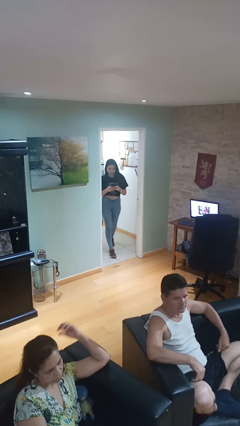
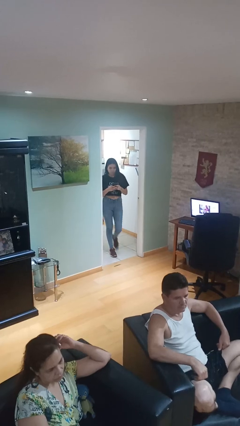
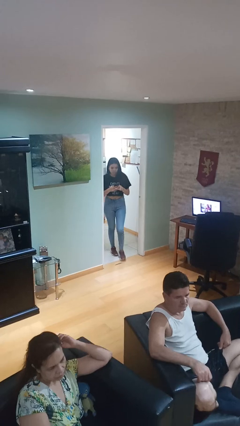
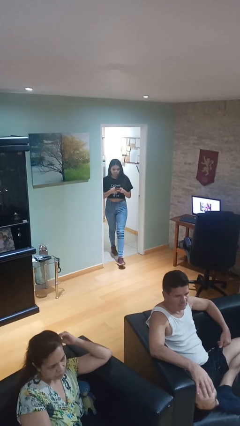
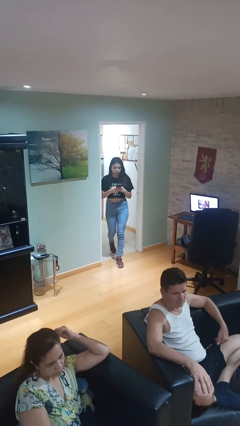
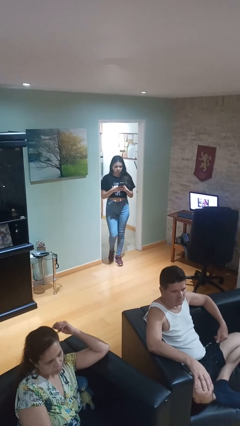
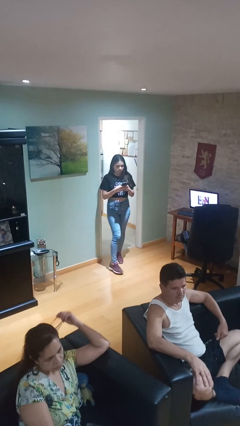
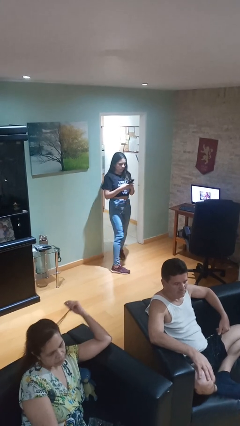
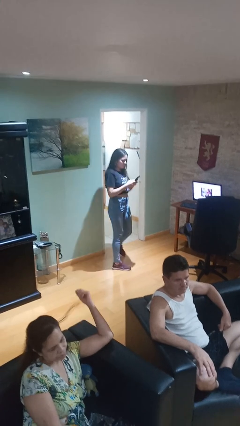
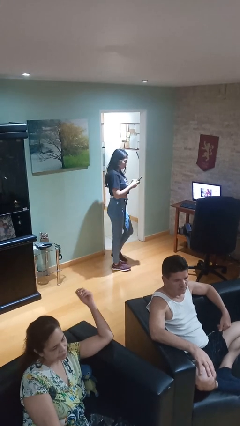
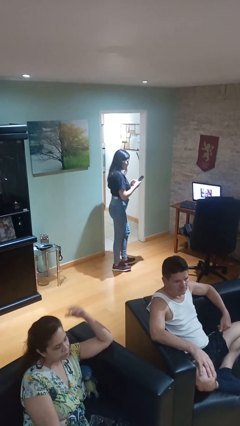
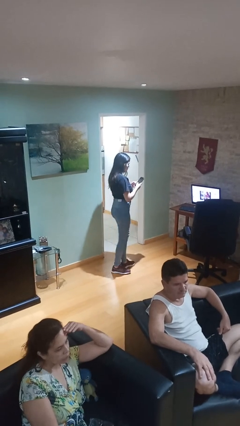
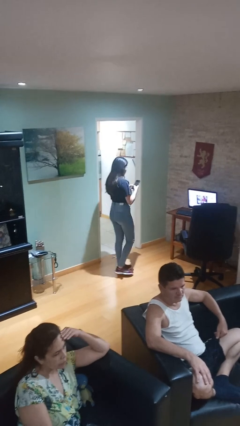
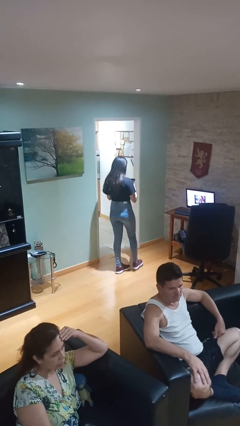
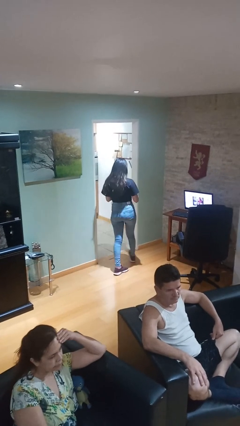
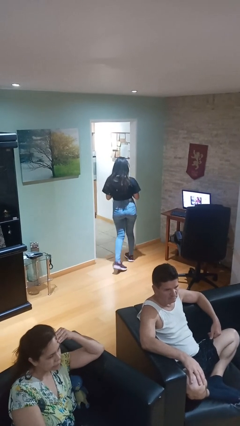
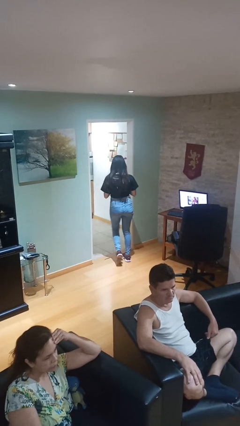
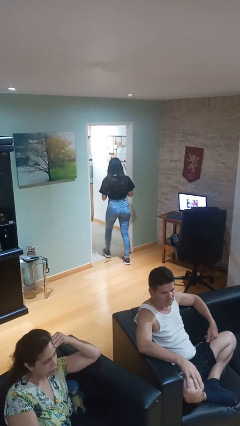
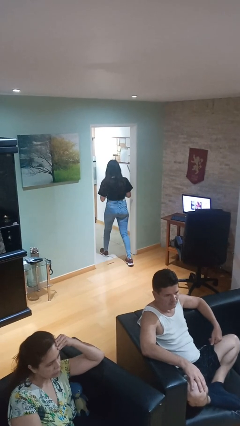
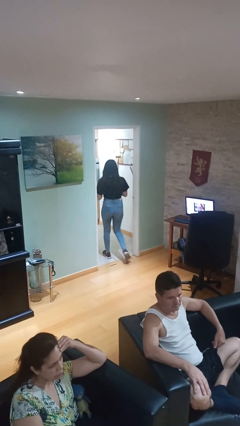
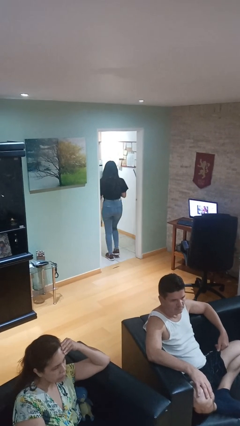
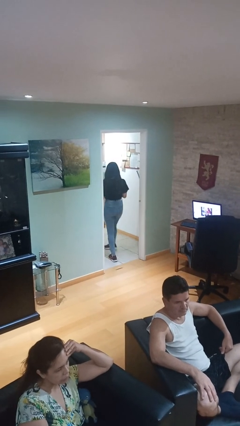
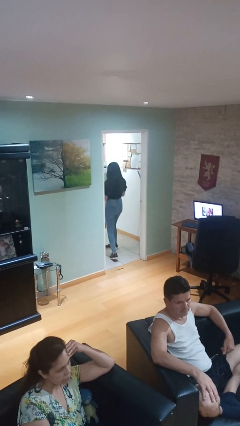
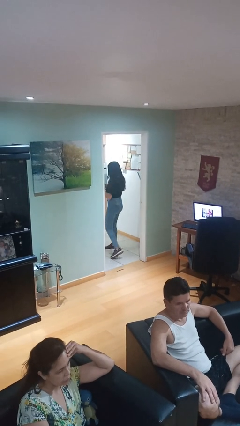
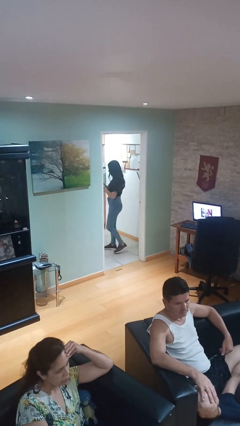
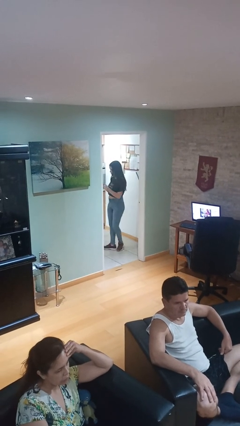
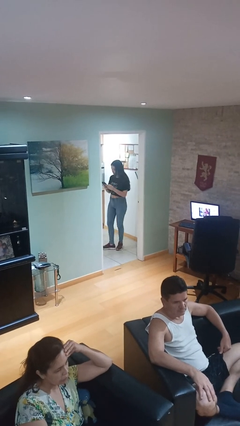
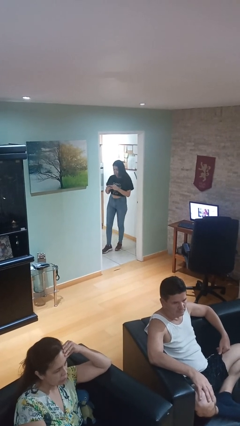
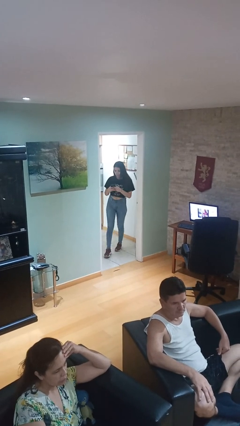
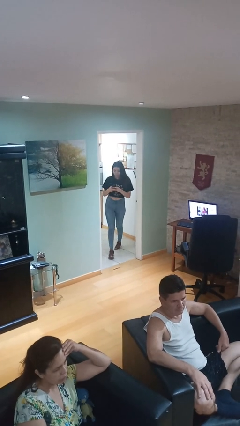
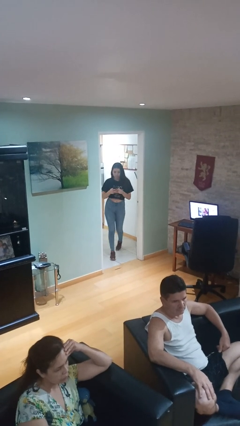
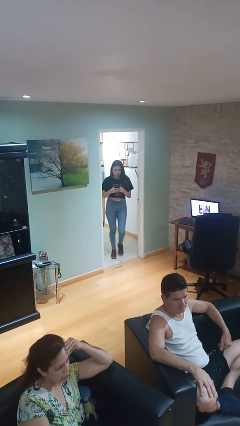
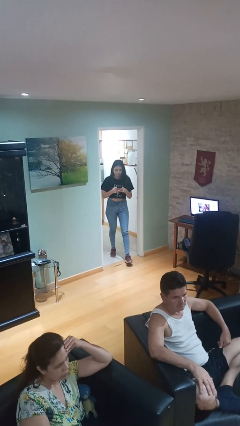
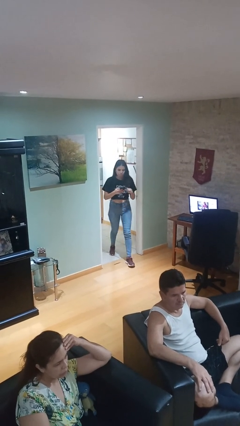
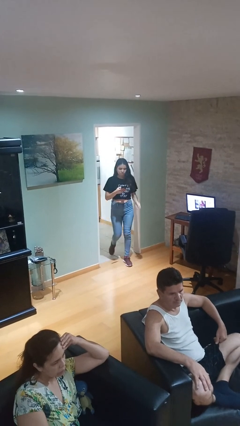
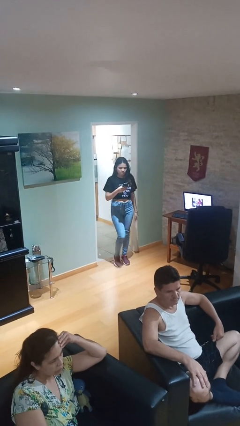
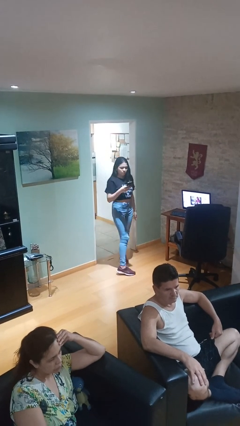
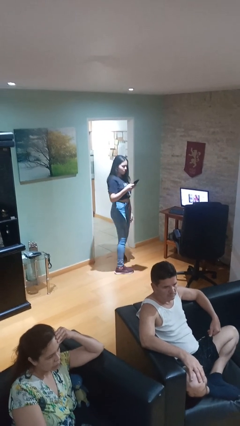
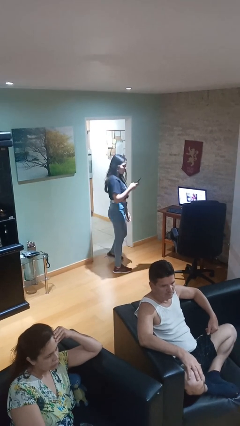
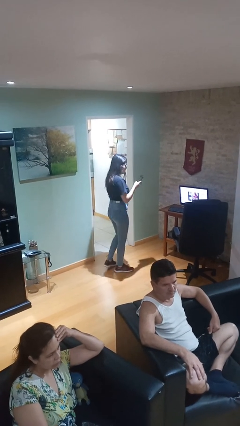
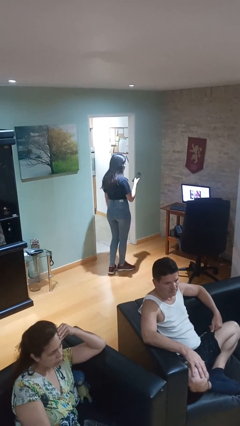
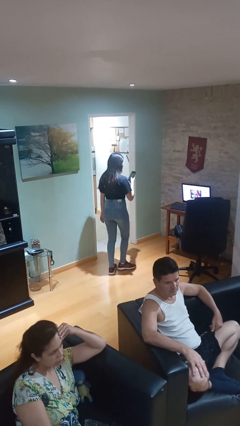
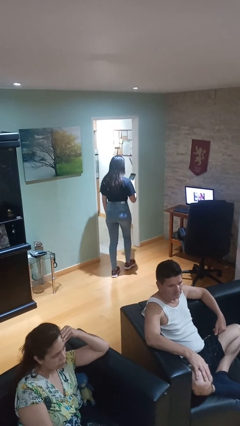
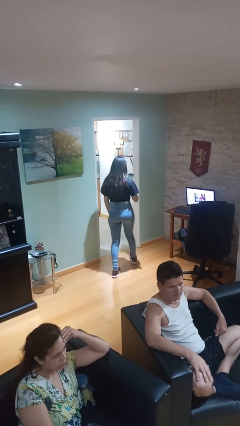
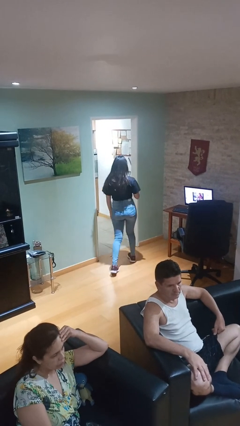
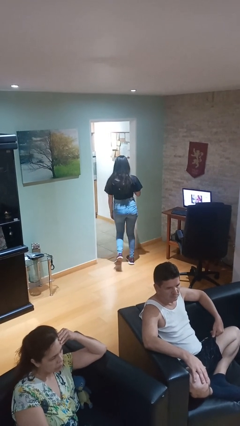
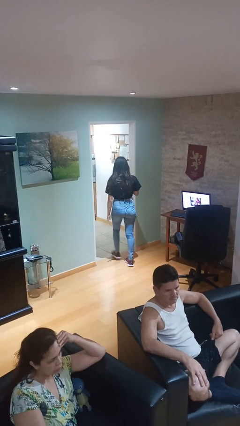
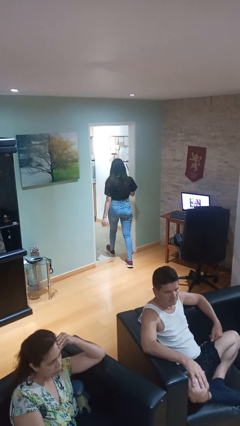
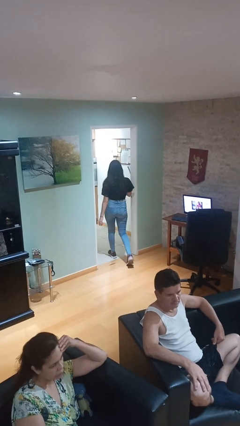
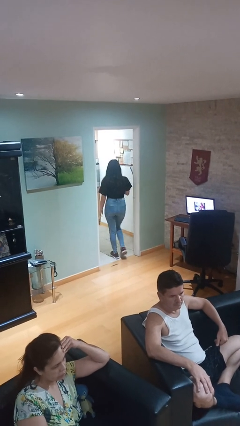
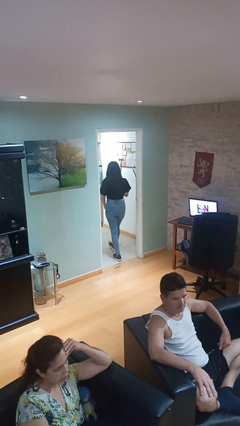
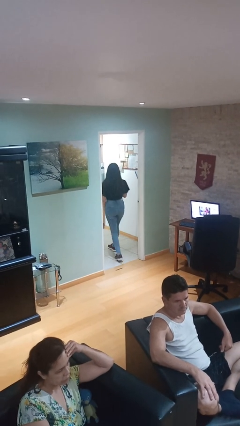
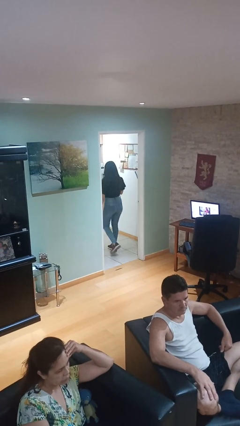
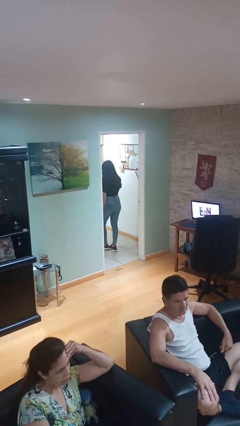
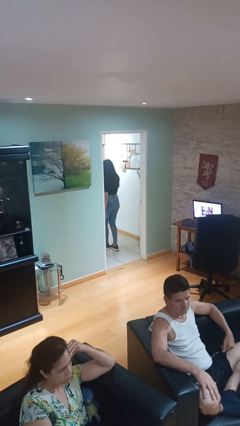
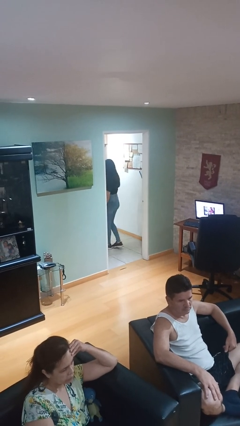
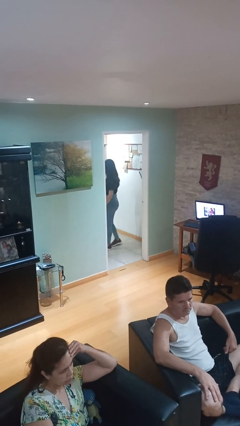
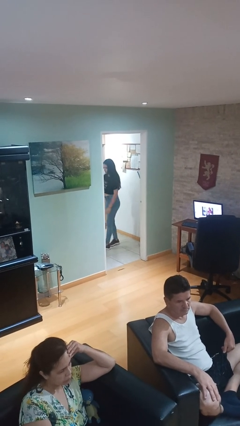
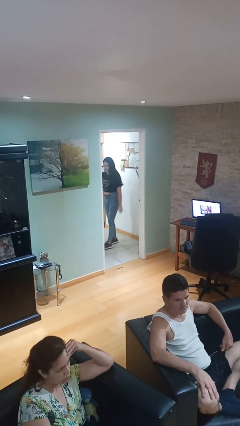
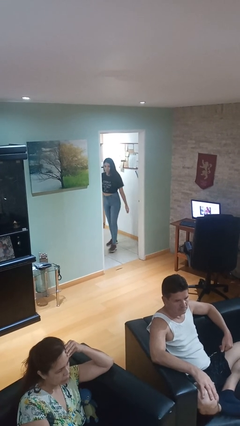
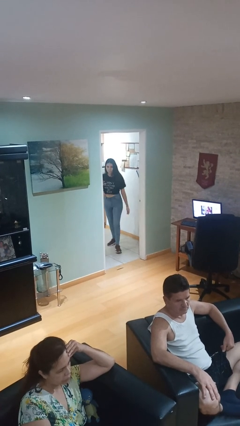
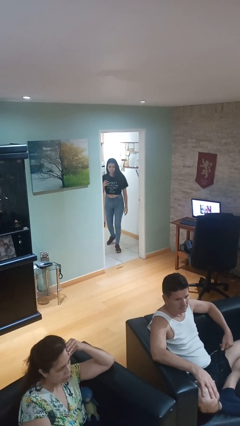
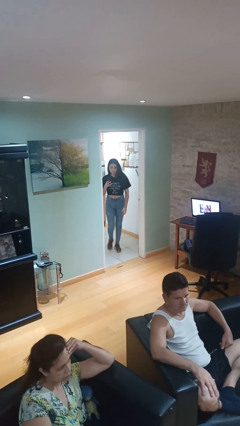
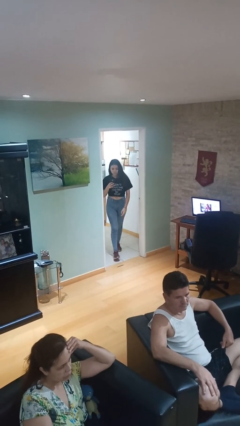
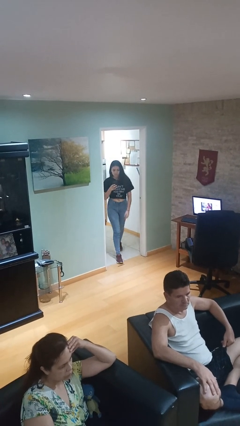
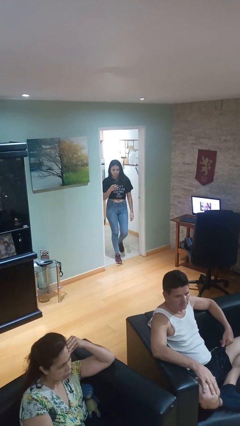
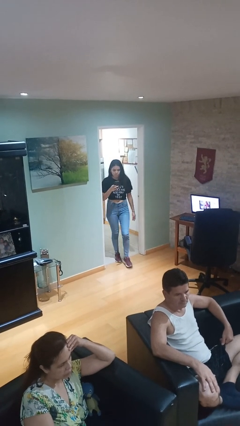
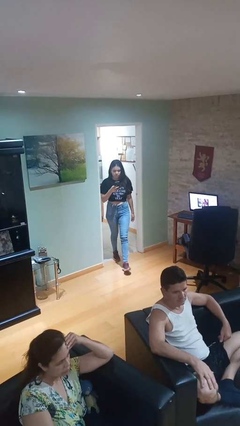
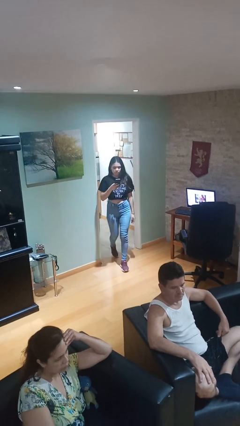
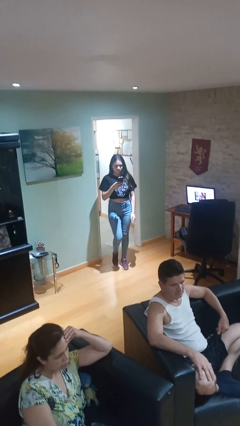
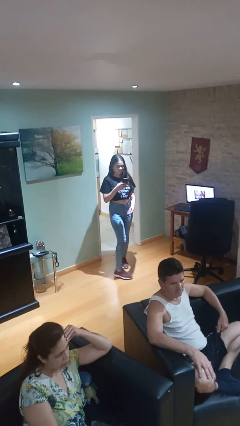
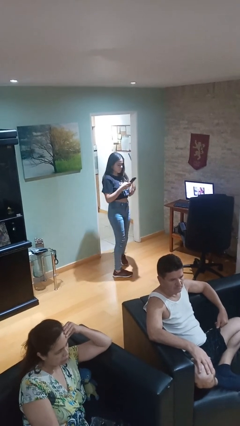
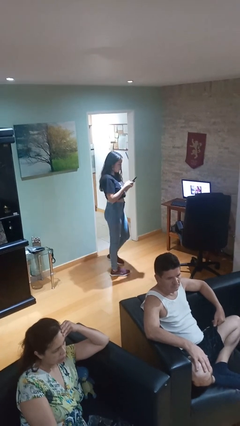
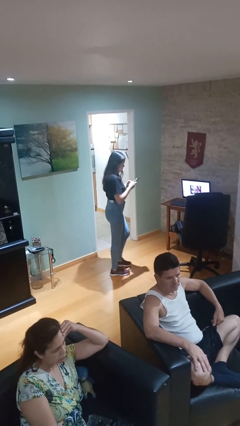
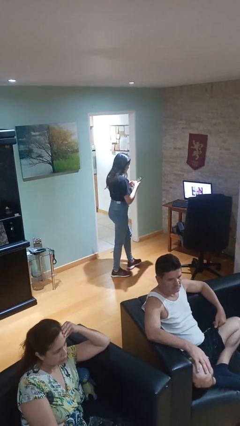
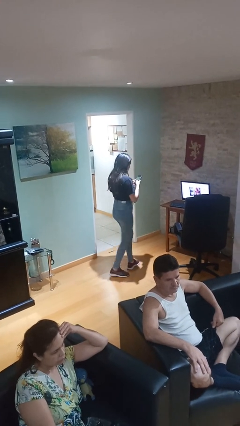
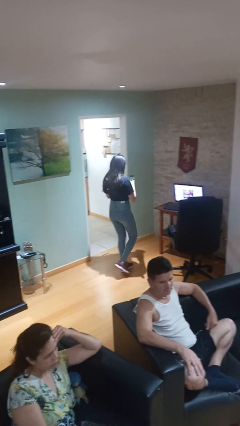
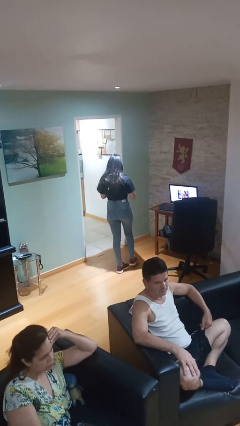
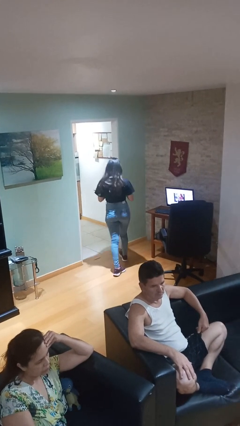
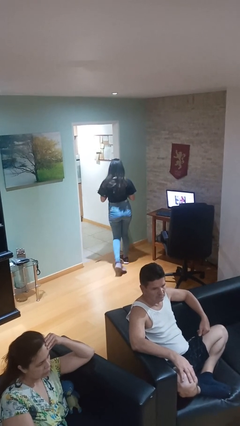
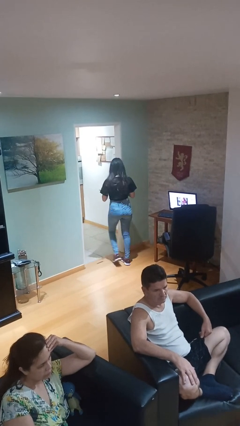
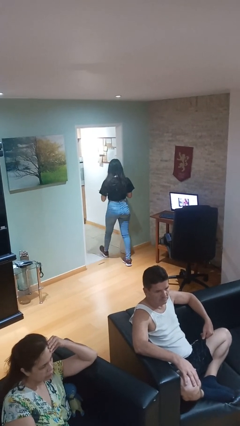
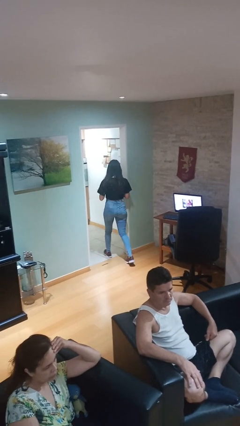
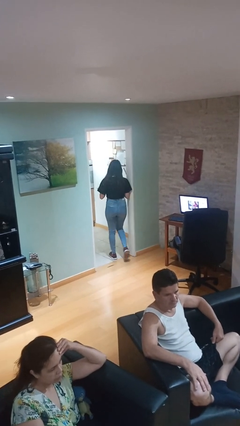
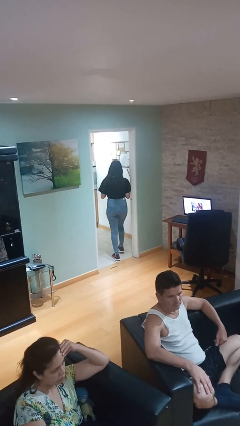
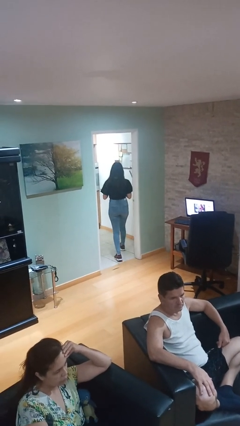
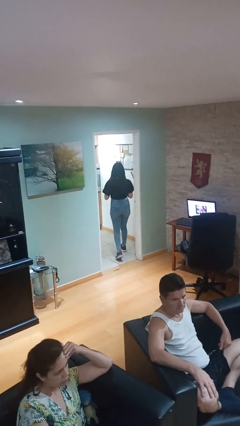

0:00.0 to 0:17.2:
person texts on phone

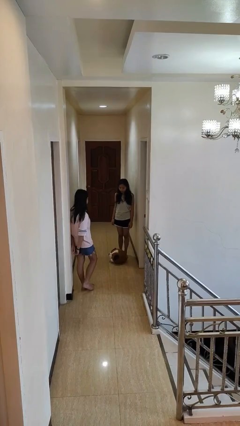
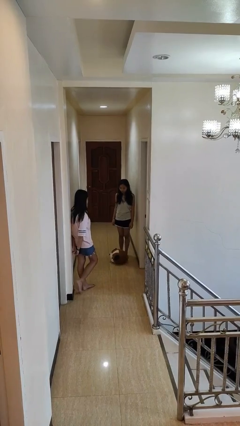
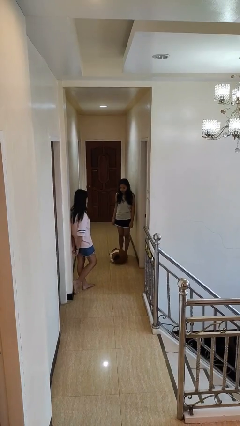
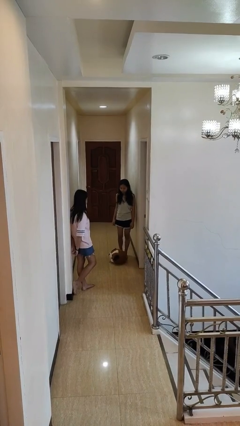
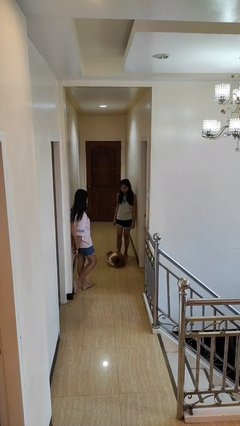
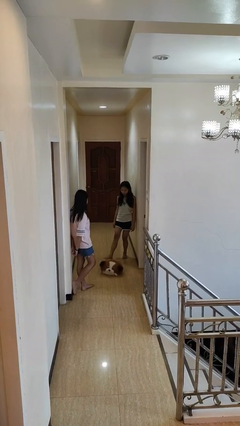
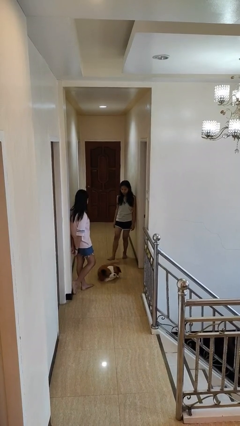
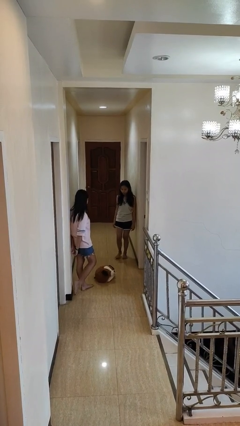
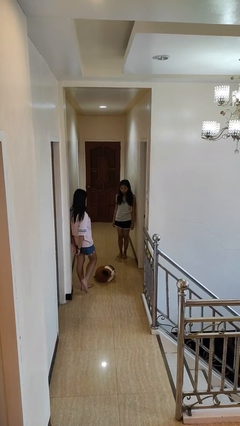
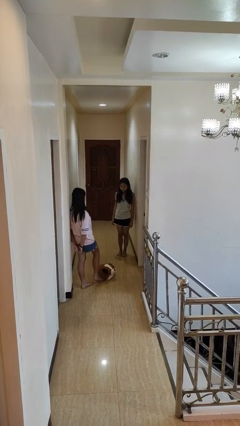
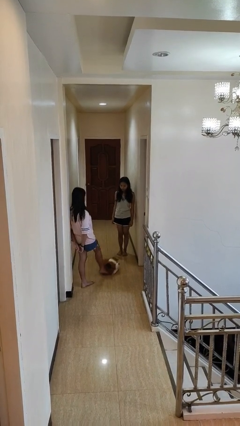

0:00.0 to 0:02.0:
person kicks object to person
